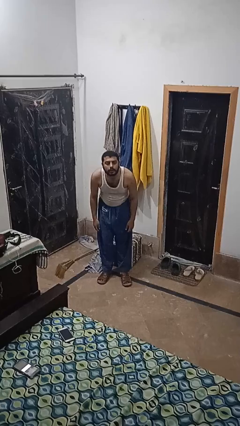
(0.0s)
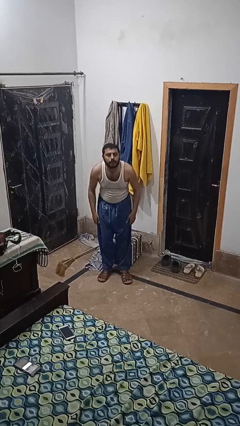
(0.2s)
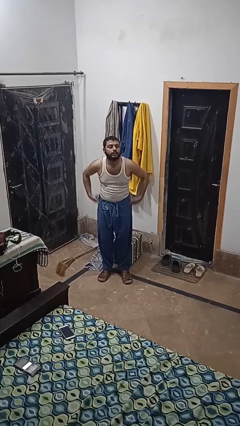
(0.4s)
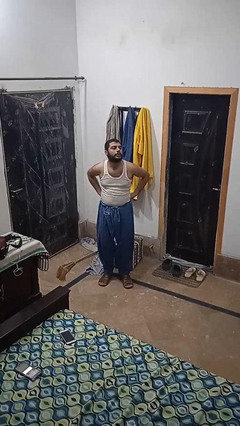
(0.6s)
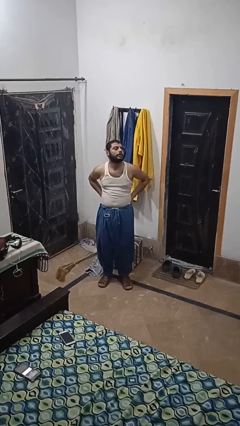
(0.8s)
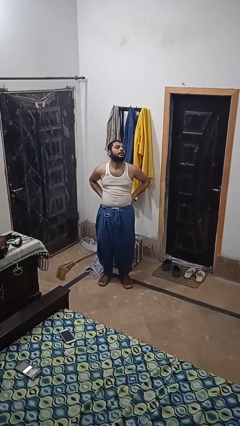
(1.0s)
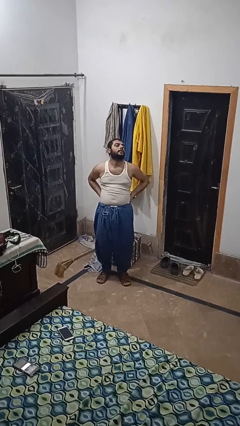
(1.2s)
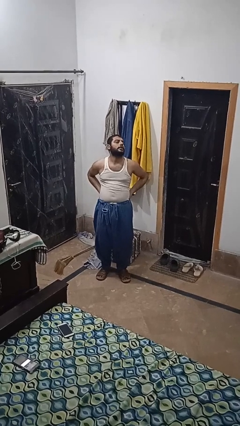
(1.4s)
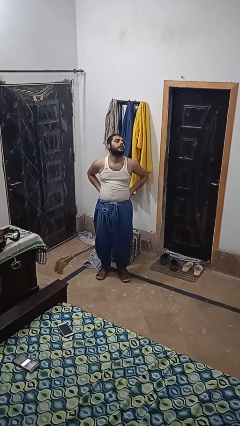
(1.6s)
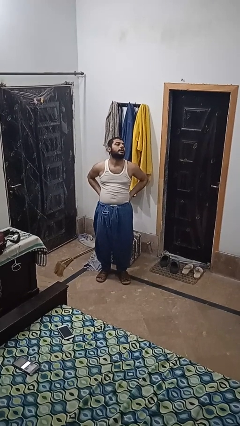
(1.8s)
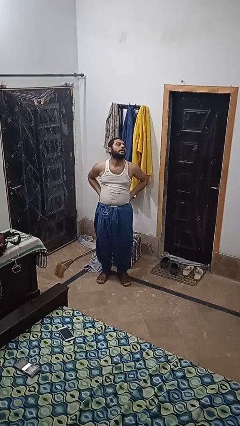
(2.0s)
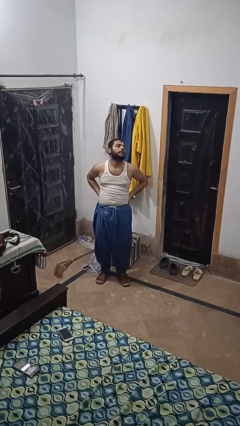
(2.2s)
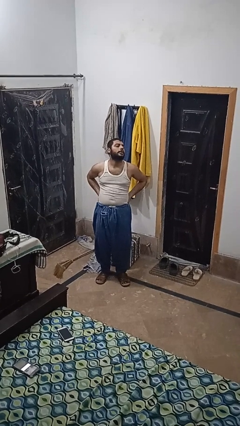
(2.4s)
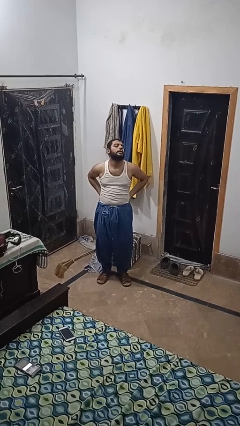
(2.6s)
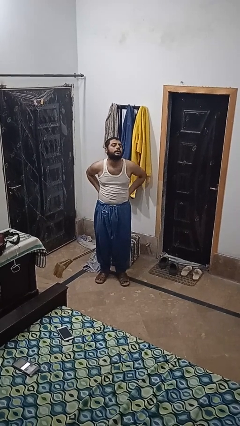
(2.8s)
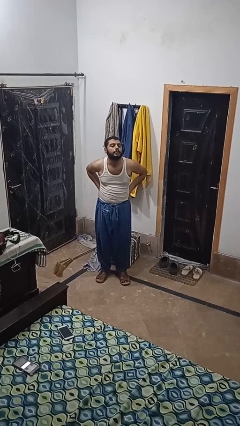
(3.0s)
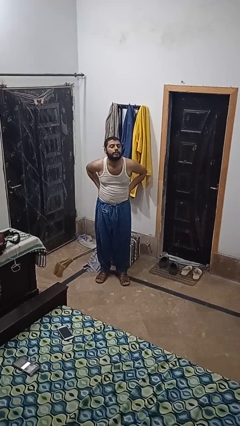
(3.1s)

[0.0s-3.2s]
person stretches back

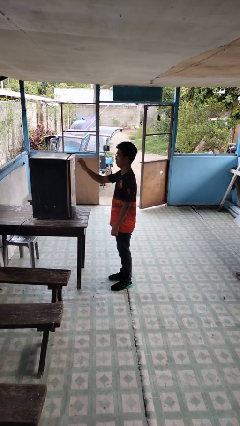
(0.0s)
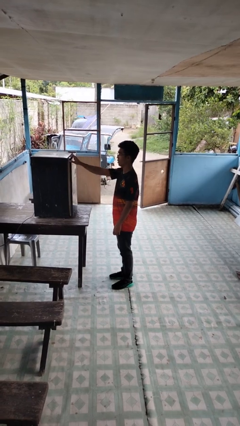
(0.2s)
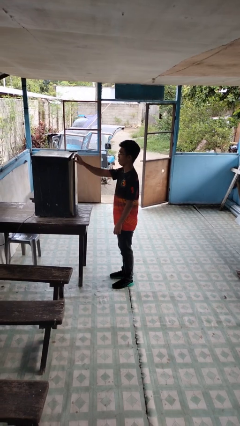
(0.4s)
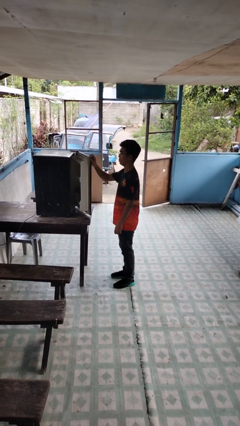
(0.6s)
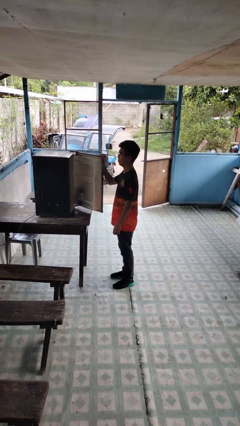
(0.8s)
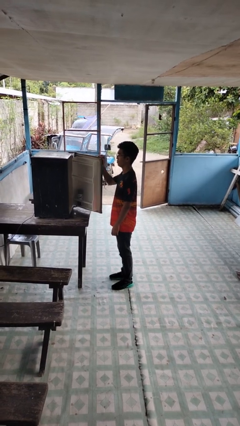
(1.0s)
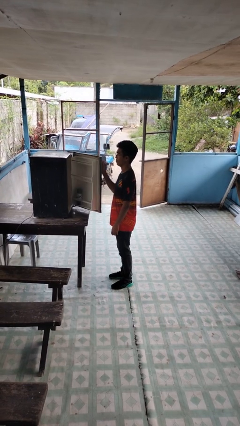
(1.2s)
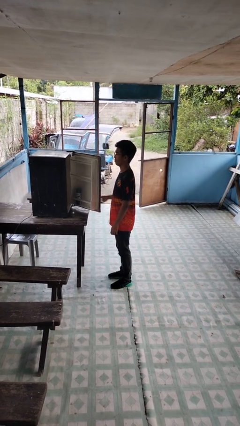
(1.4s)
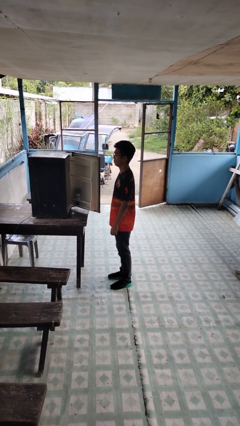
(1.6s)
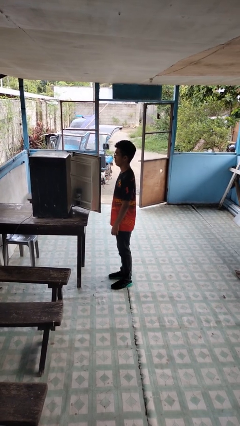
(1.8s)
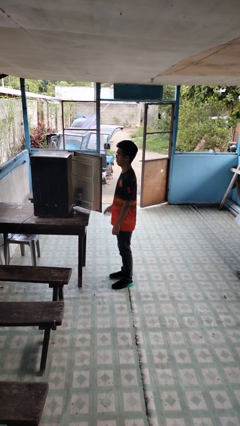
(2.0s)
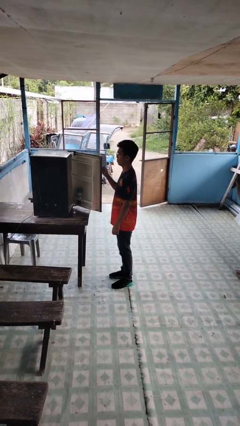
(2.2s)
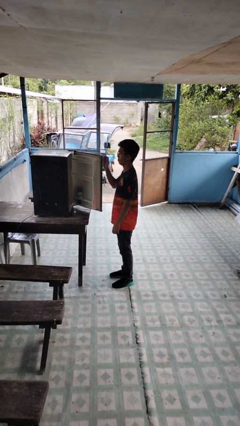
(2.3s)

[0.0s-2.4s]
person opens refrigerator

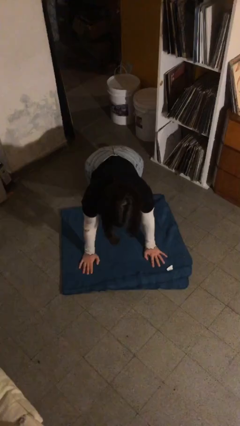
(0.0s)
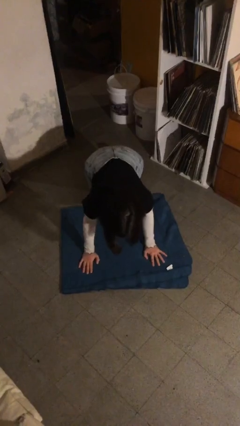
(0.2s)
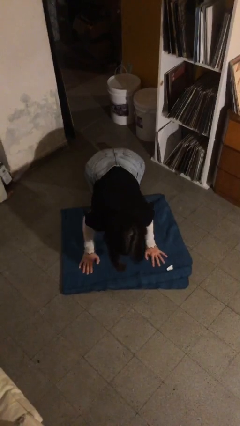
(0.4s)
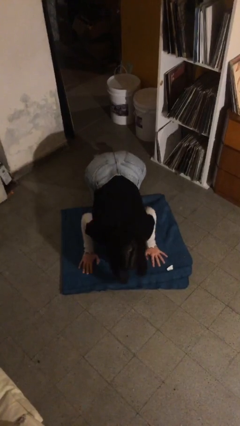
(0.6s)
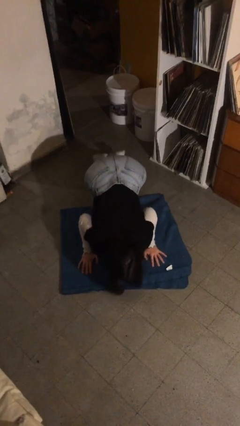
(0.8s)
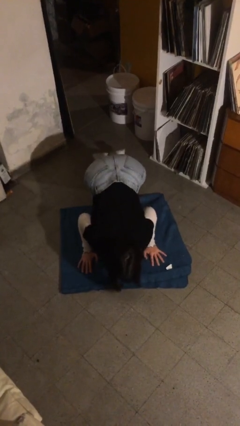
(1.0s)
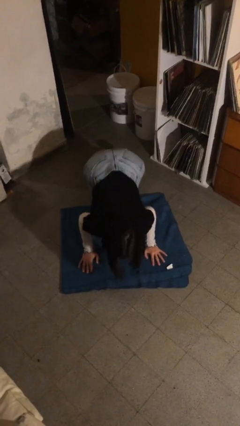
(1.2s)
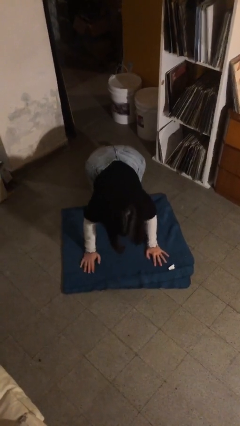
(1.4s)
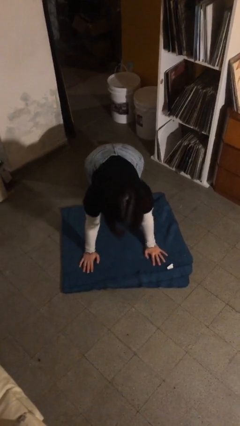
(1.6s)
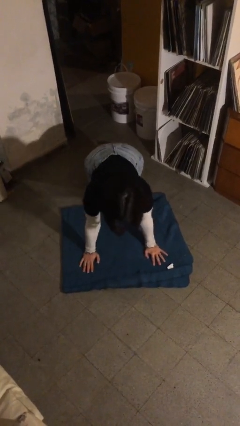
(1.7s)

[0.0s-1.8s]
person exercises with pushup

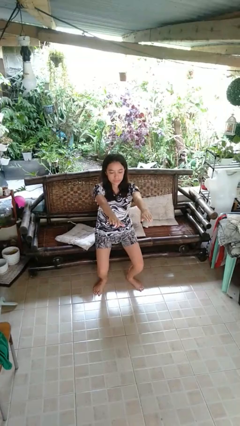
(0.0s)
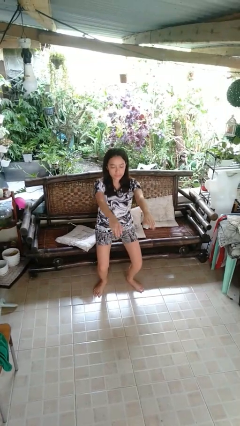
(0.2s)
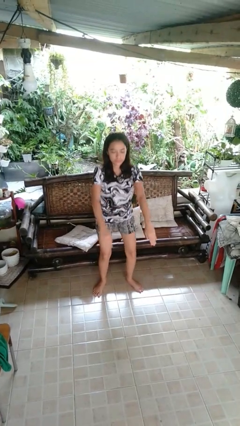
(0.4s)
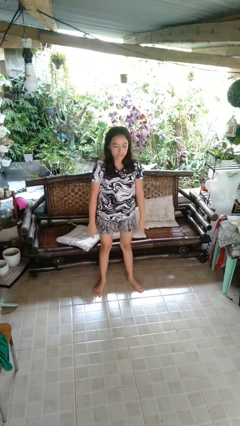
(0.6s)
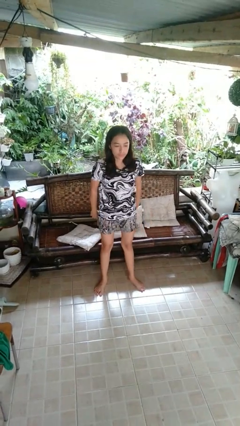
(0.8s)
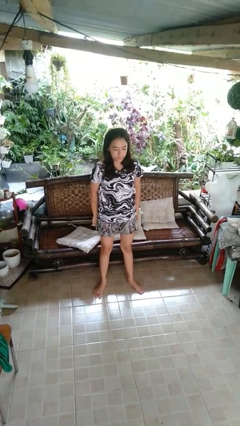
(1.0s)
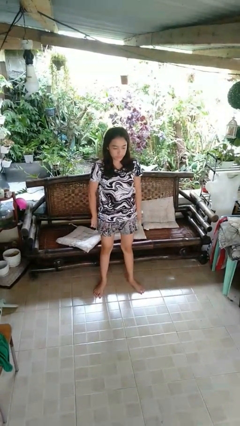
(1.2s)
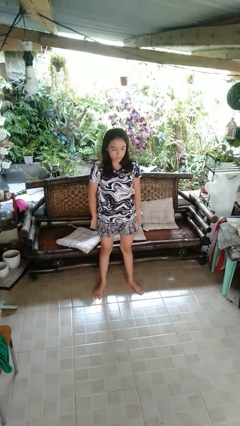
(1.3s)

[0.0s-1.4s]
person stands up

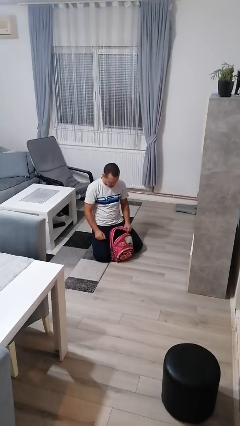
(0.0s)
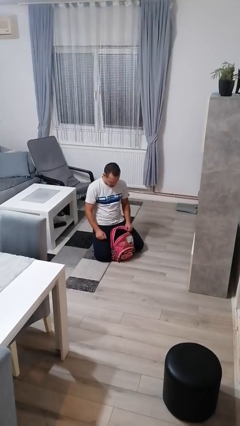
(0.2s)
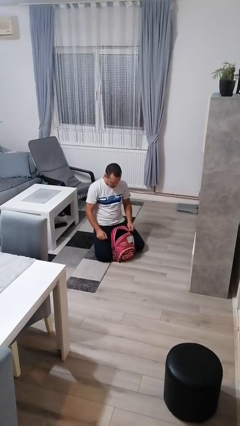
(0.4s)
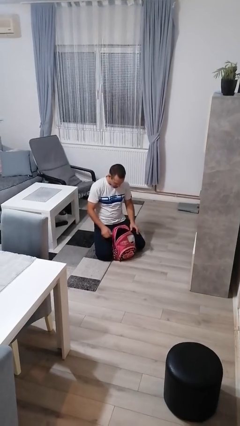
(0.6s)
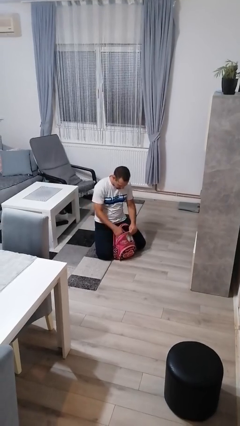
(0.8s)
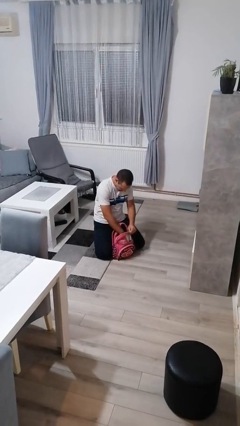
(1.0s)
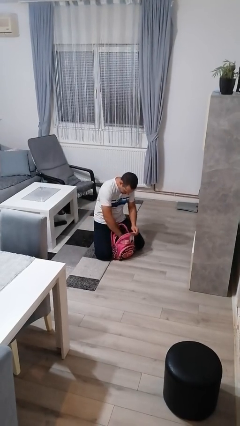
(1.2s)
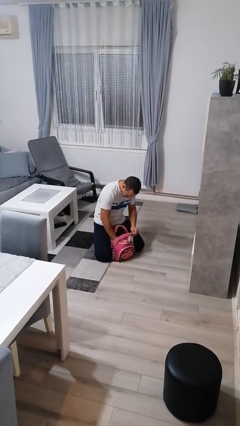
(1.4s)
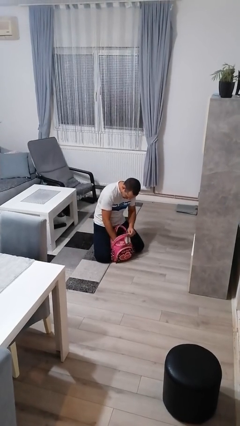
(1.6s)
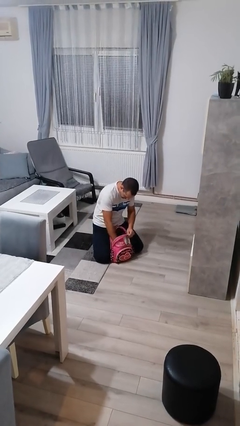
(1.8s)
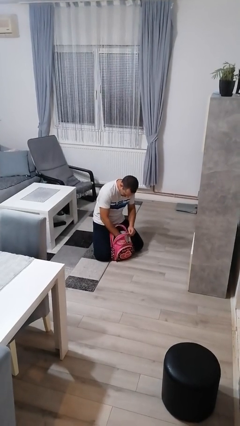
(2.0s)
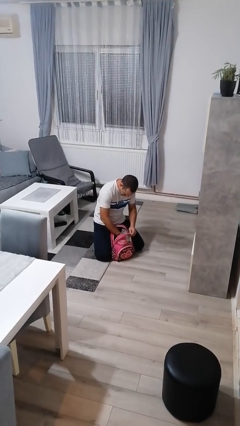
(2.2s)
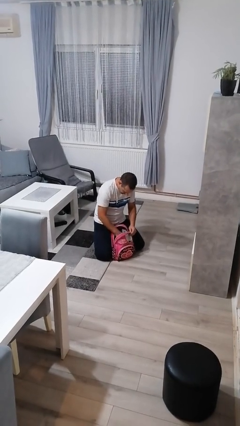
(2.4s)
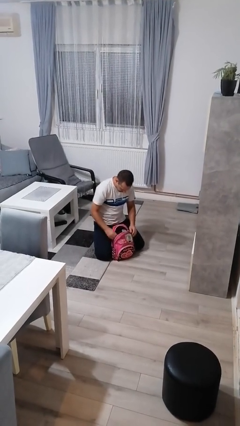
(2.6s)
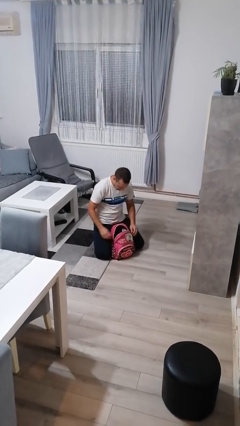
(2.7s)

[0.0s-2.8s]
person searches in bag

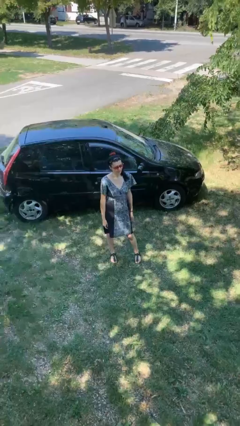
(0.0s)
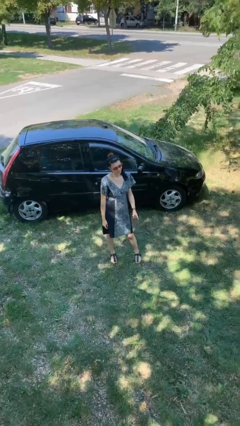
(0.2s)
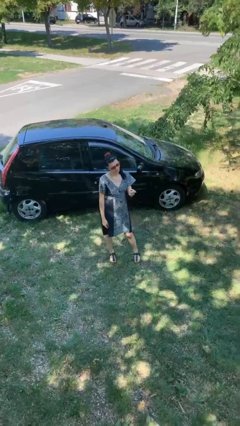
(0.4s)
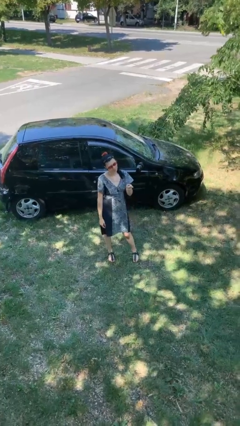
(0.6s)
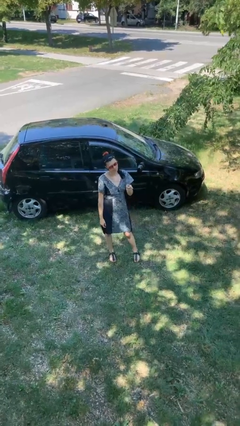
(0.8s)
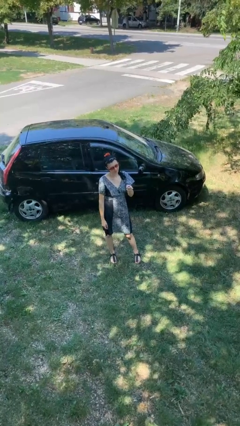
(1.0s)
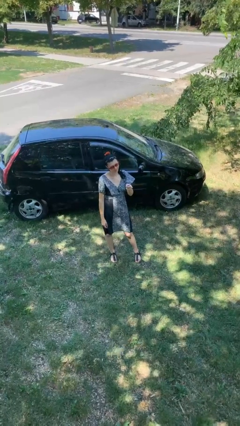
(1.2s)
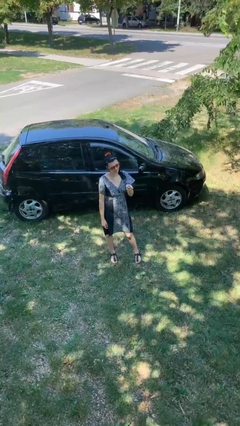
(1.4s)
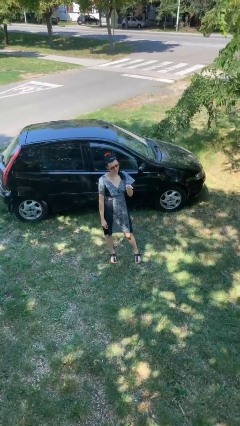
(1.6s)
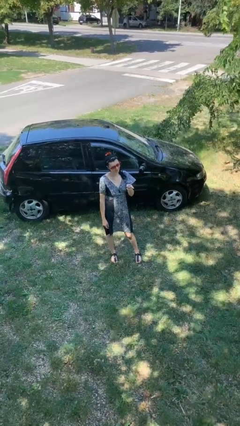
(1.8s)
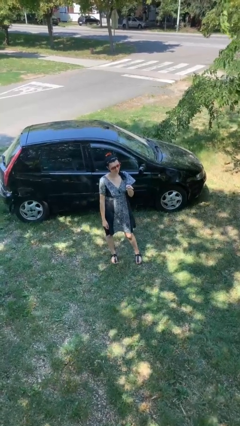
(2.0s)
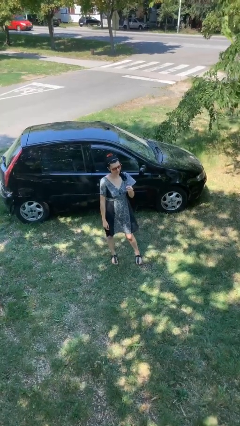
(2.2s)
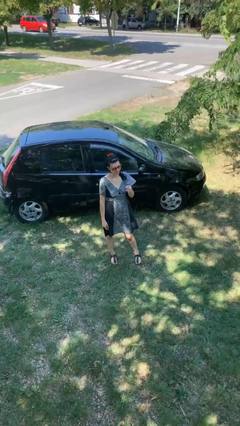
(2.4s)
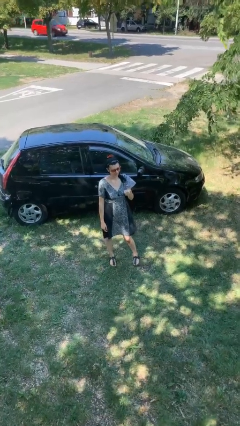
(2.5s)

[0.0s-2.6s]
person points at person

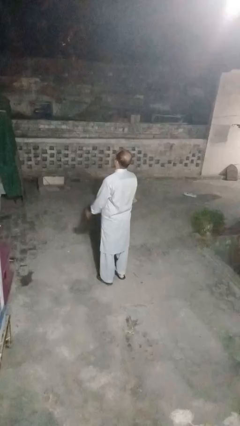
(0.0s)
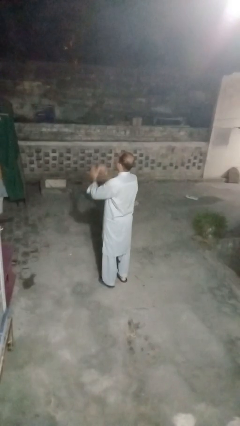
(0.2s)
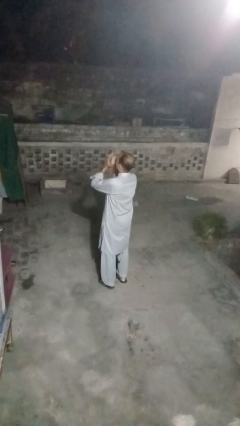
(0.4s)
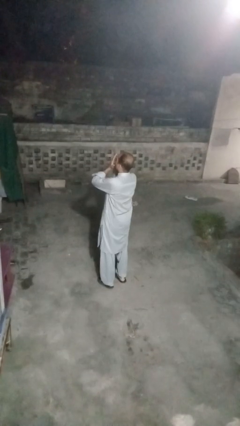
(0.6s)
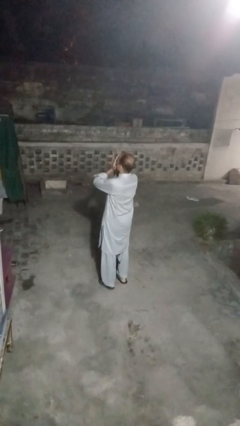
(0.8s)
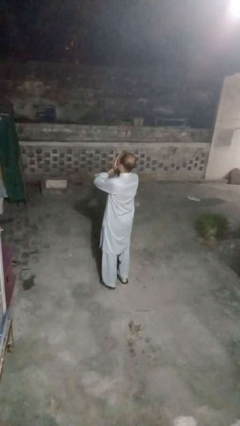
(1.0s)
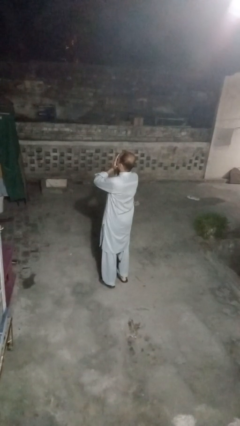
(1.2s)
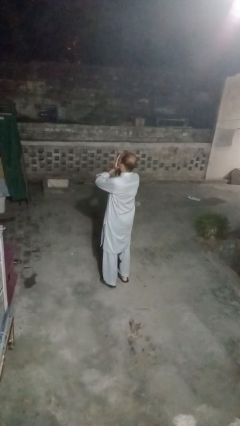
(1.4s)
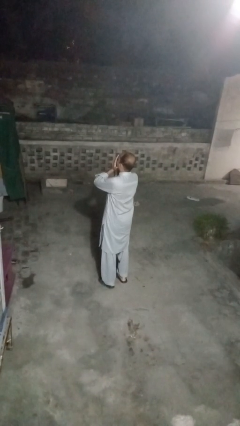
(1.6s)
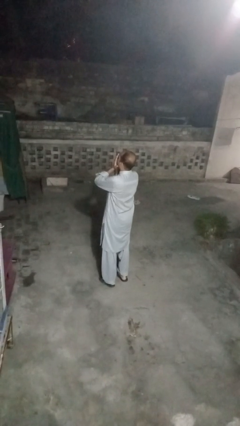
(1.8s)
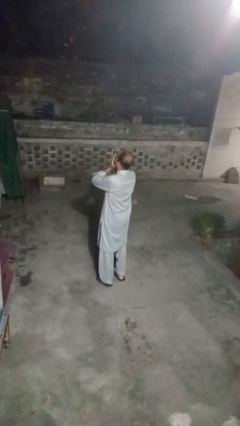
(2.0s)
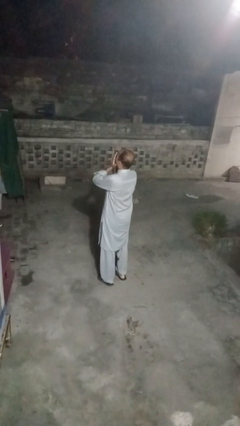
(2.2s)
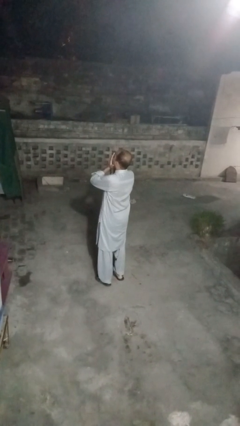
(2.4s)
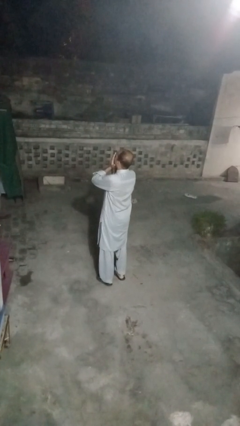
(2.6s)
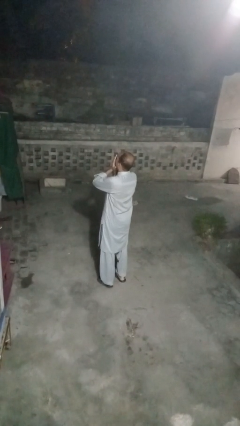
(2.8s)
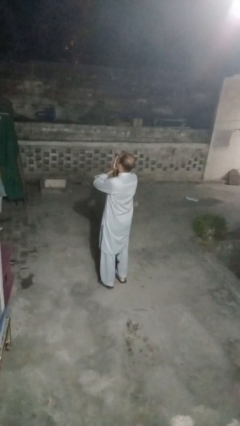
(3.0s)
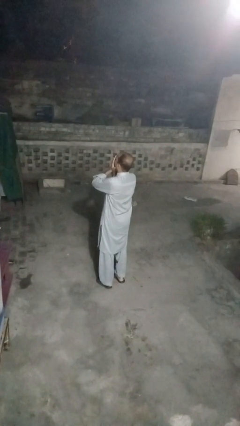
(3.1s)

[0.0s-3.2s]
person covers face with hands
